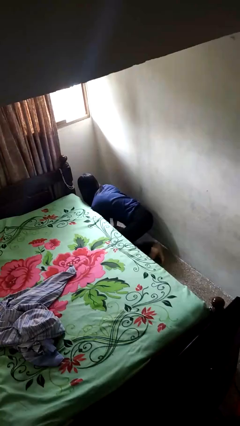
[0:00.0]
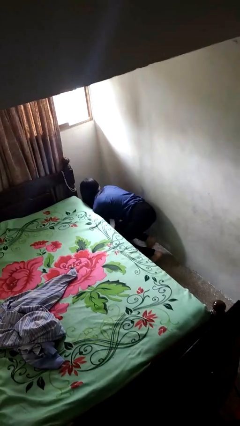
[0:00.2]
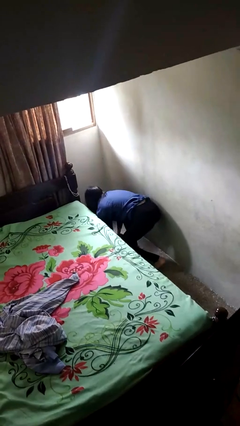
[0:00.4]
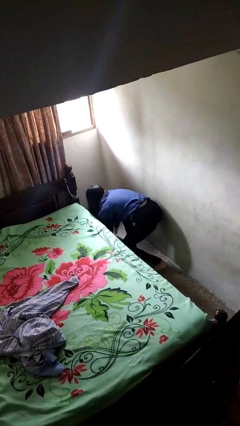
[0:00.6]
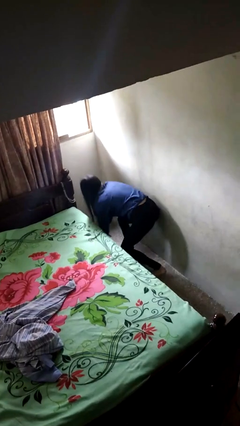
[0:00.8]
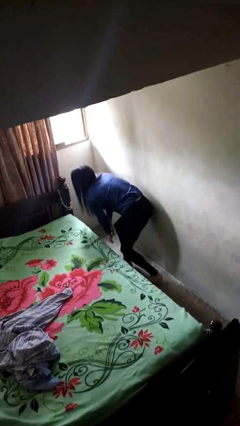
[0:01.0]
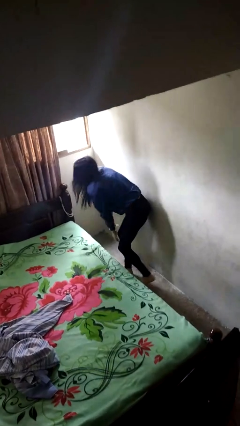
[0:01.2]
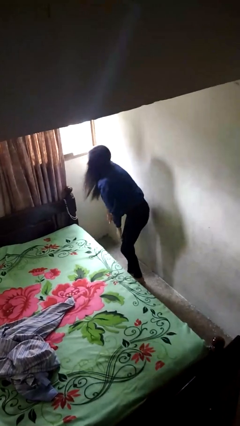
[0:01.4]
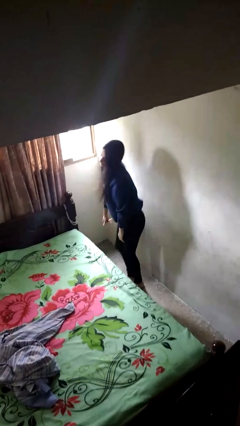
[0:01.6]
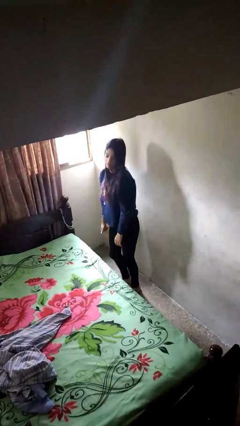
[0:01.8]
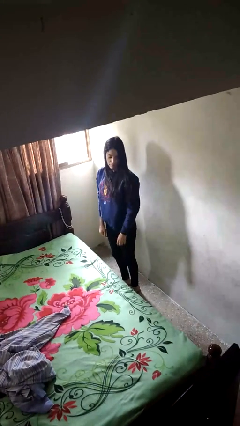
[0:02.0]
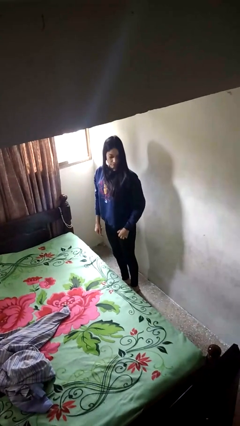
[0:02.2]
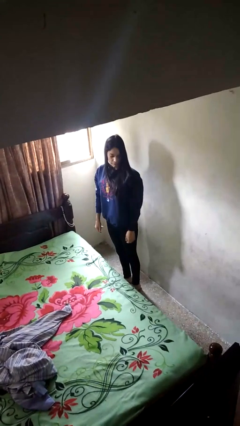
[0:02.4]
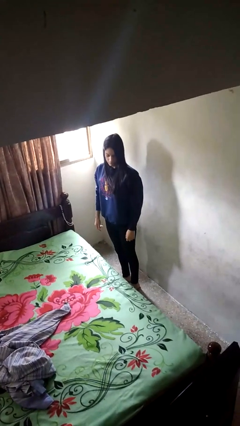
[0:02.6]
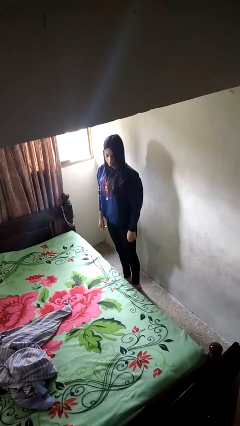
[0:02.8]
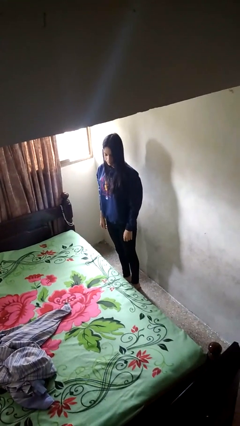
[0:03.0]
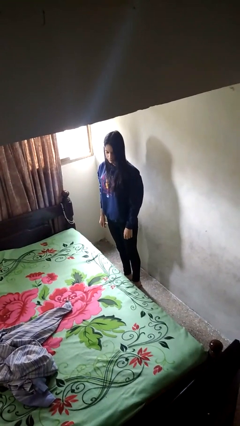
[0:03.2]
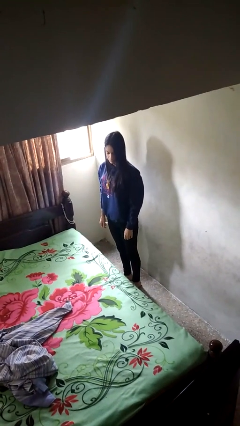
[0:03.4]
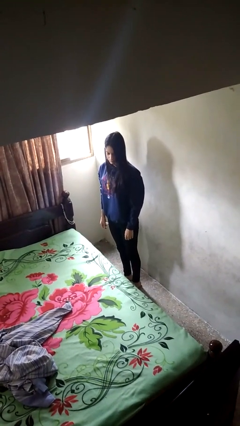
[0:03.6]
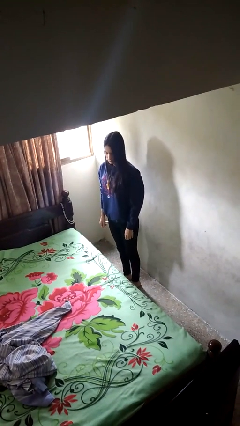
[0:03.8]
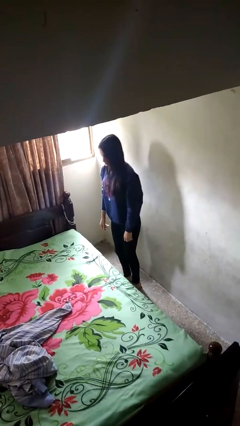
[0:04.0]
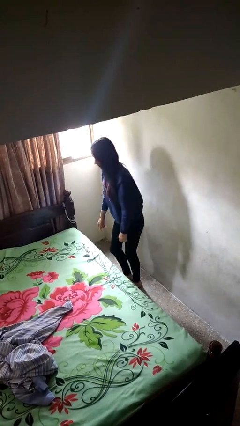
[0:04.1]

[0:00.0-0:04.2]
person stands up from floor

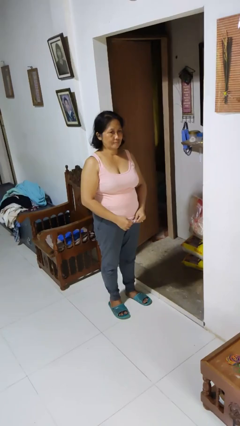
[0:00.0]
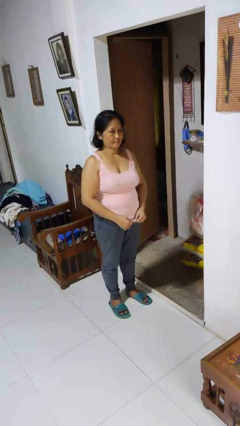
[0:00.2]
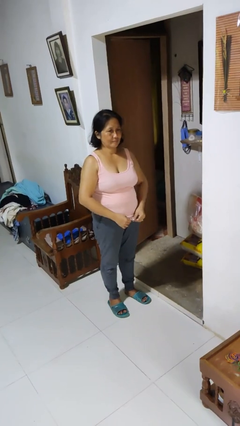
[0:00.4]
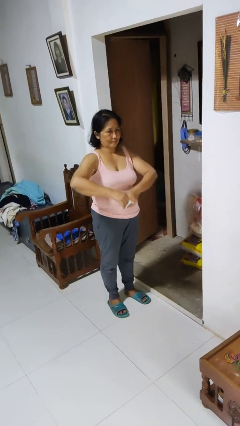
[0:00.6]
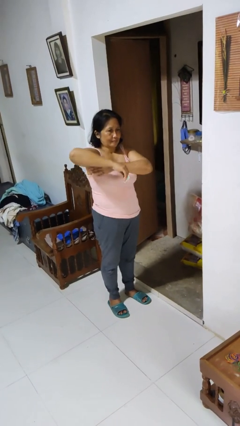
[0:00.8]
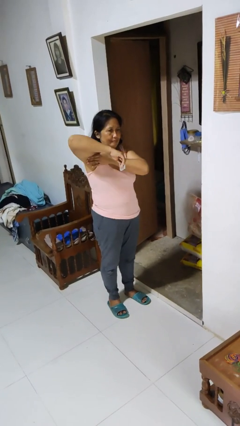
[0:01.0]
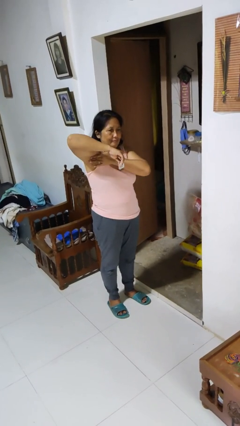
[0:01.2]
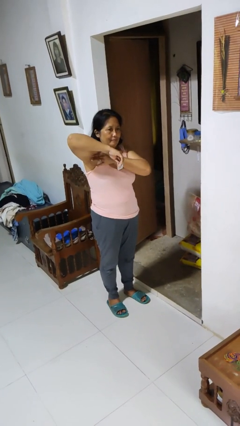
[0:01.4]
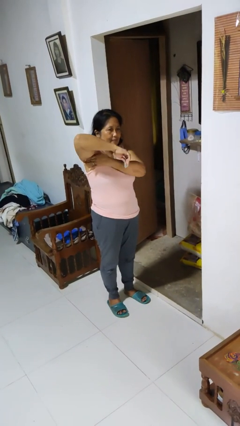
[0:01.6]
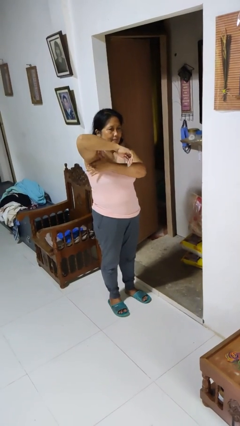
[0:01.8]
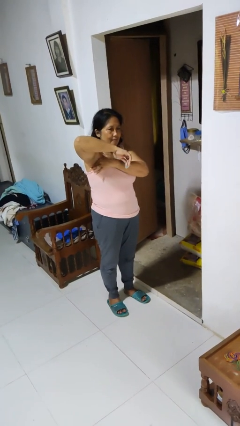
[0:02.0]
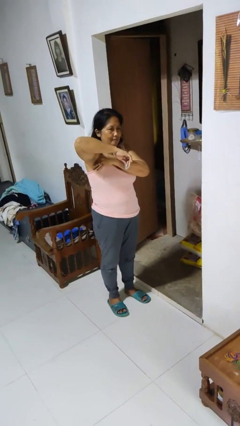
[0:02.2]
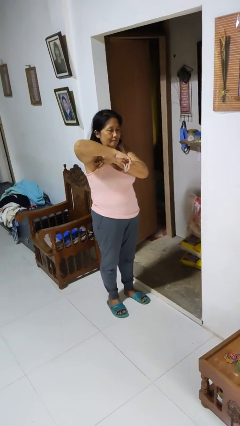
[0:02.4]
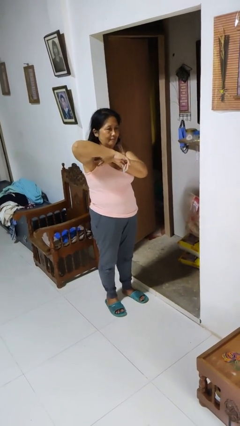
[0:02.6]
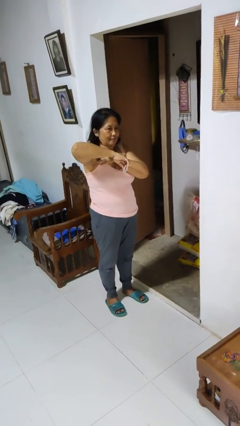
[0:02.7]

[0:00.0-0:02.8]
person applies deodorant

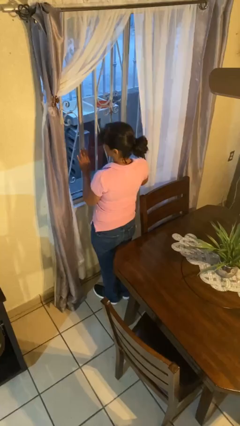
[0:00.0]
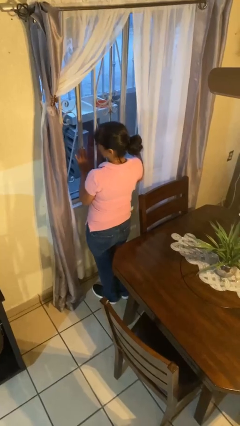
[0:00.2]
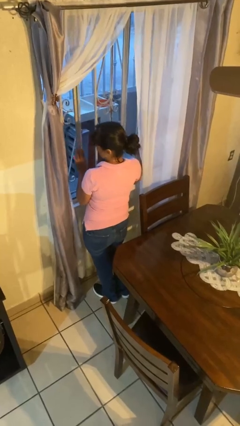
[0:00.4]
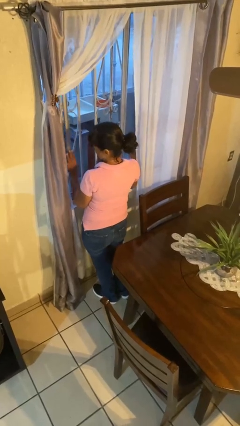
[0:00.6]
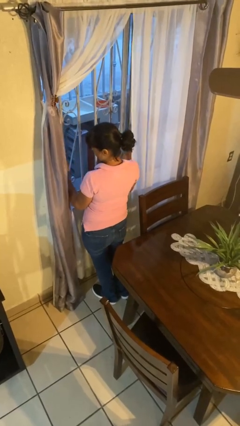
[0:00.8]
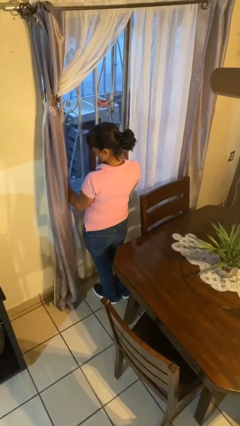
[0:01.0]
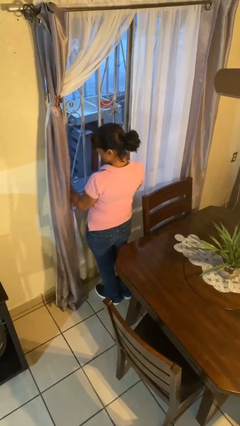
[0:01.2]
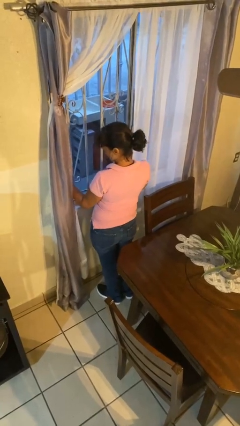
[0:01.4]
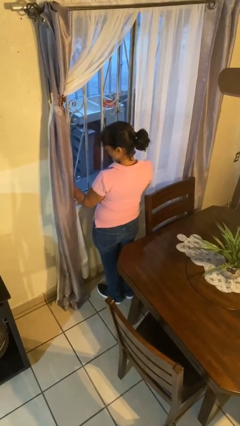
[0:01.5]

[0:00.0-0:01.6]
person closes home window

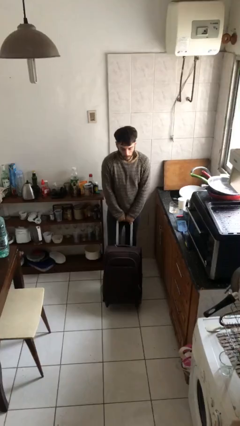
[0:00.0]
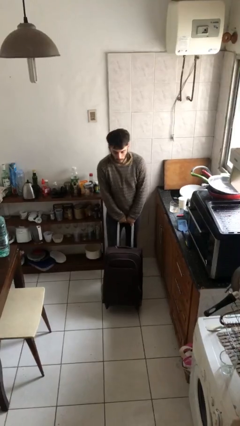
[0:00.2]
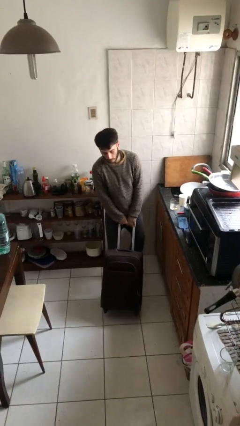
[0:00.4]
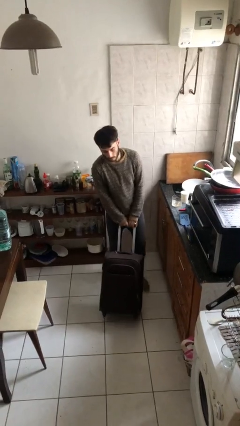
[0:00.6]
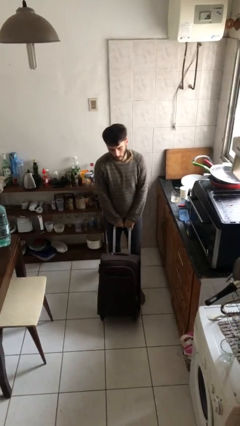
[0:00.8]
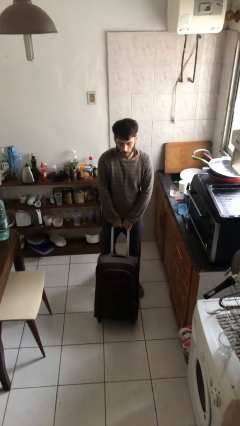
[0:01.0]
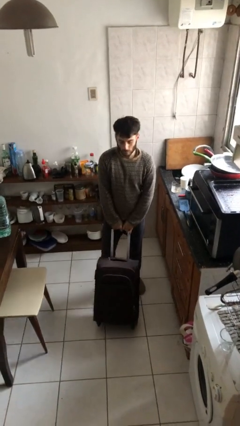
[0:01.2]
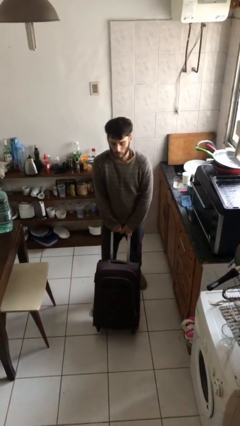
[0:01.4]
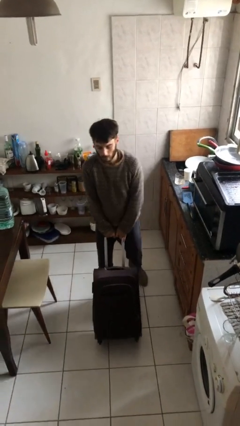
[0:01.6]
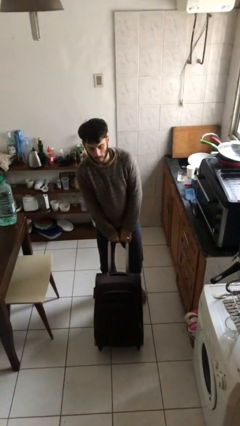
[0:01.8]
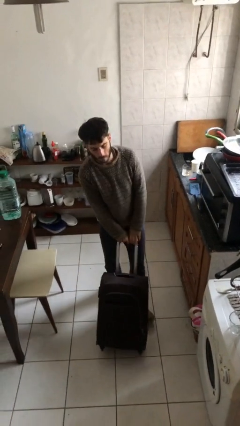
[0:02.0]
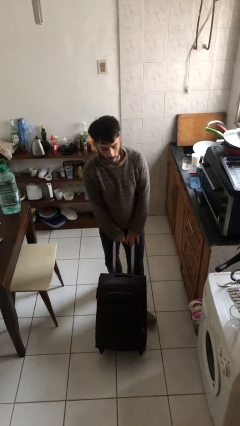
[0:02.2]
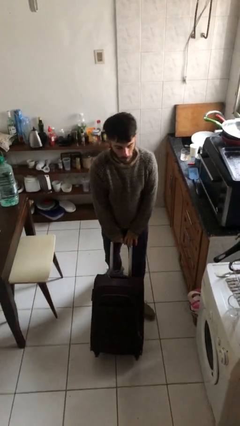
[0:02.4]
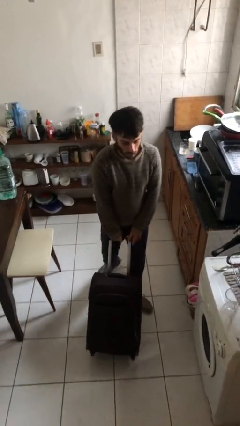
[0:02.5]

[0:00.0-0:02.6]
person pushes wheeled cart

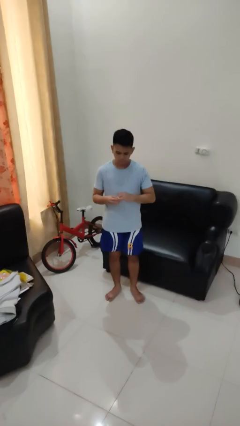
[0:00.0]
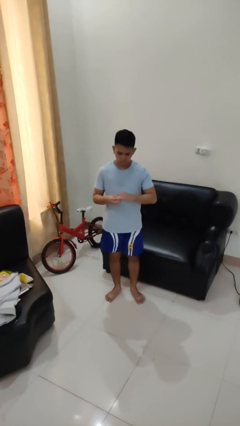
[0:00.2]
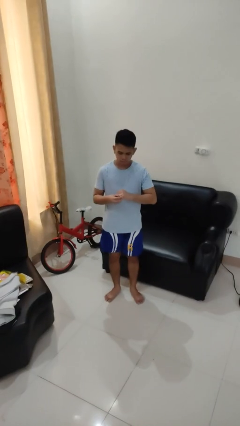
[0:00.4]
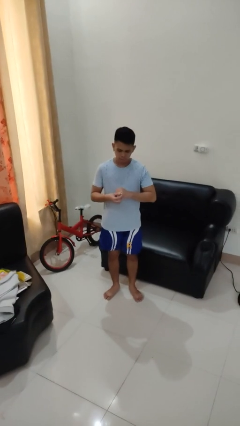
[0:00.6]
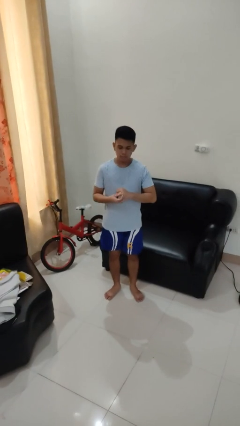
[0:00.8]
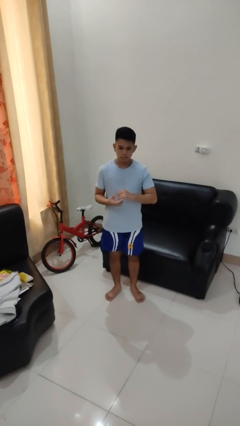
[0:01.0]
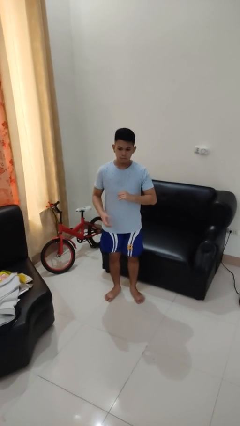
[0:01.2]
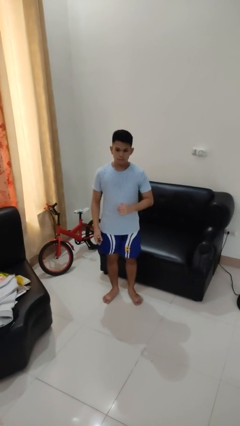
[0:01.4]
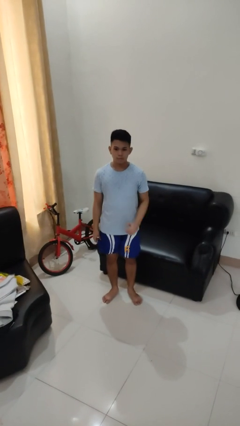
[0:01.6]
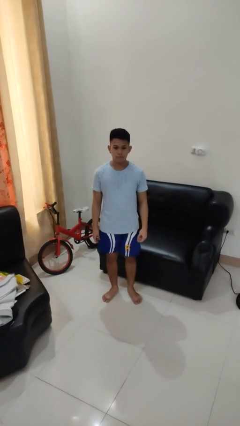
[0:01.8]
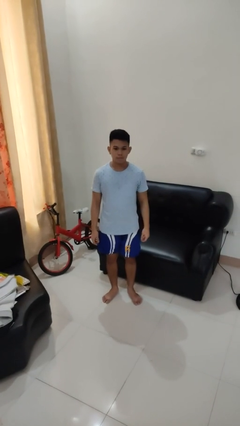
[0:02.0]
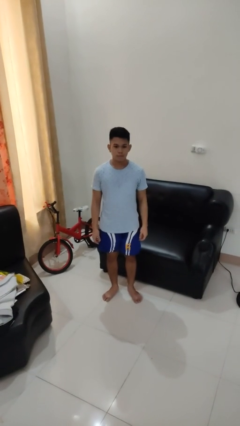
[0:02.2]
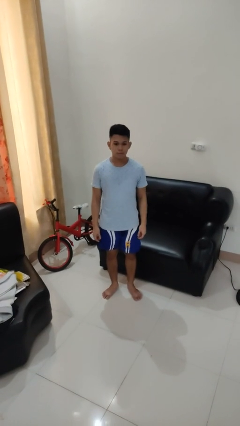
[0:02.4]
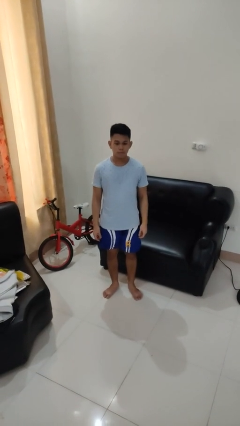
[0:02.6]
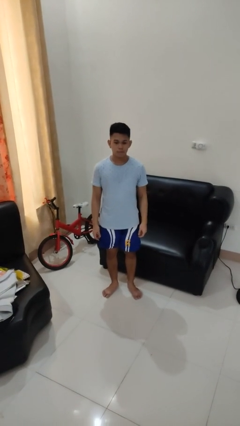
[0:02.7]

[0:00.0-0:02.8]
person puts on ring

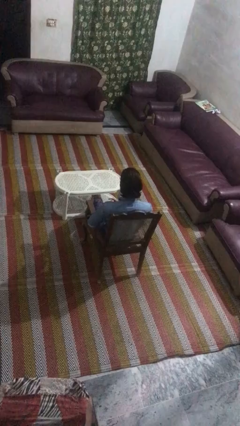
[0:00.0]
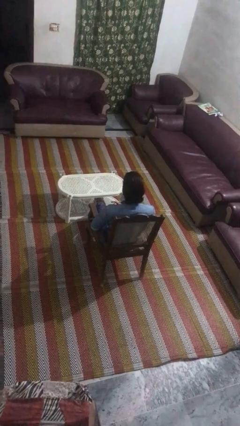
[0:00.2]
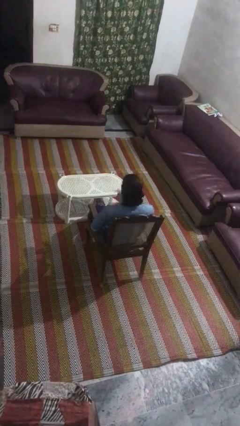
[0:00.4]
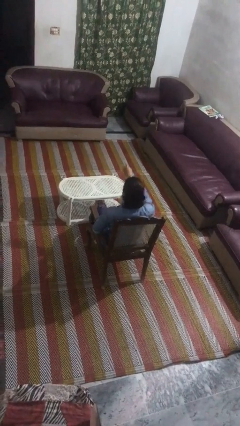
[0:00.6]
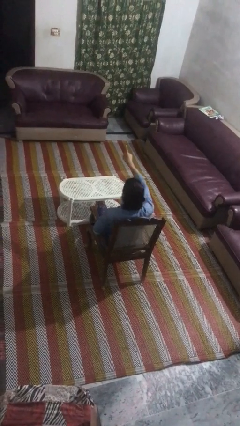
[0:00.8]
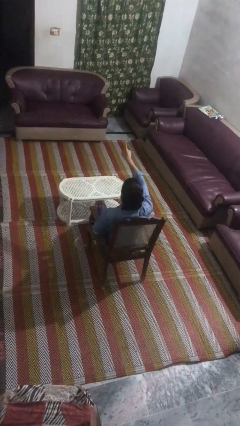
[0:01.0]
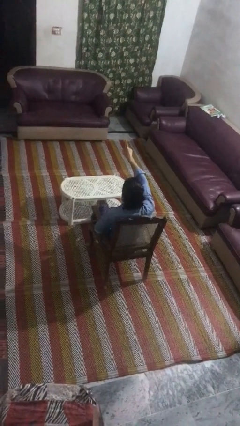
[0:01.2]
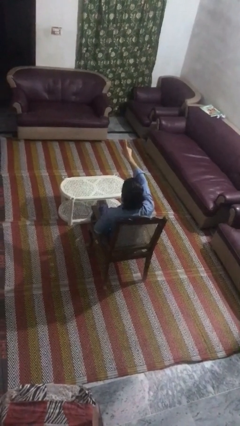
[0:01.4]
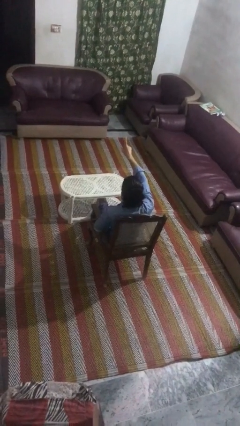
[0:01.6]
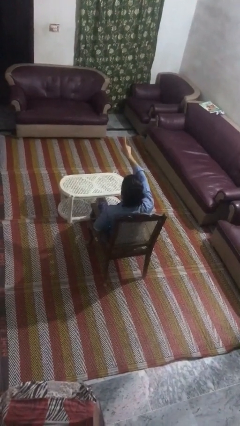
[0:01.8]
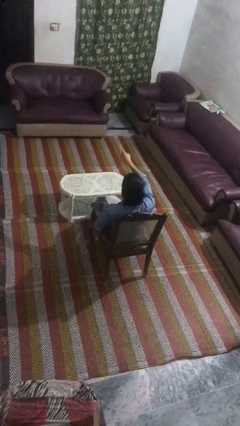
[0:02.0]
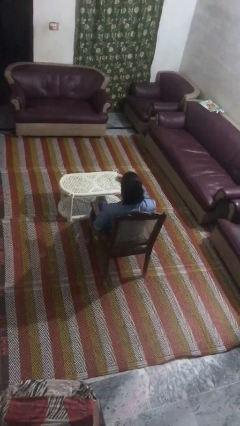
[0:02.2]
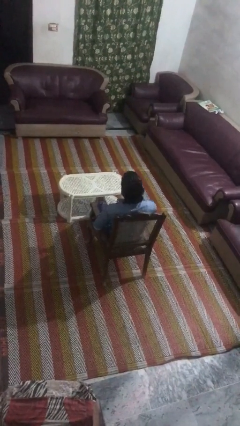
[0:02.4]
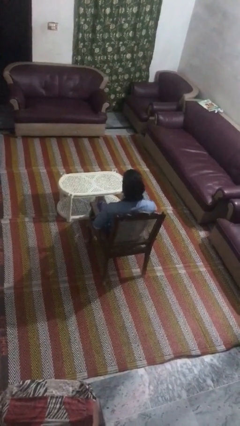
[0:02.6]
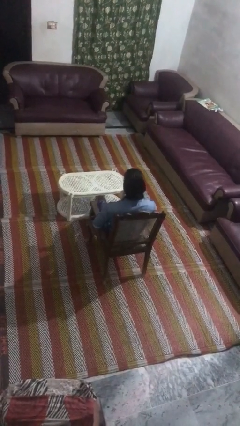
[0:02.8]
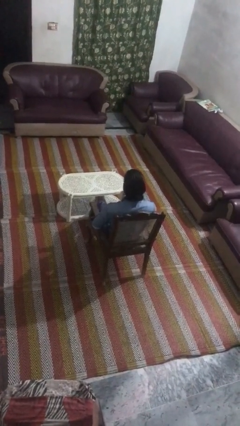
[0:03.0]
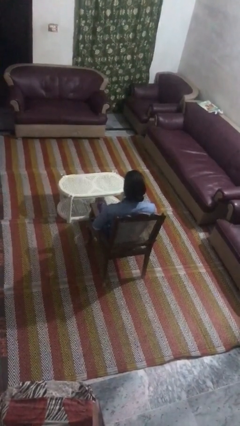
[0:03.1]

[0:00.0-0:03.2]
person gestures number one

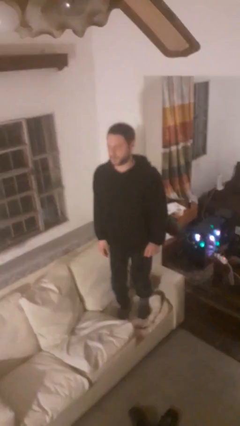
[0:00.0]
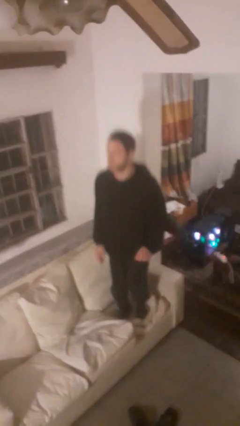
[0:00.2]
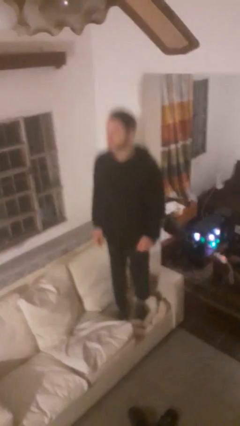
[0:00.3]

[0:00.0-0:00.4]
person jumps on couch

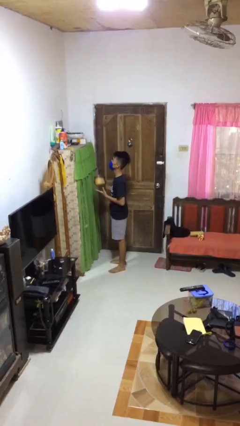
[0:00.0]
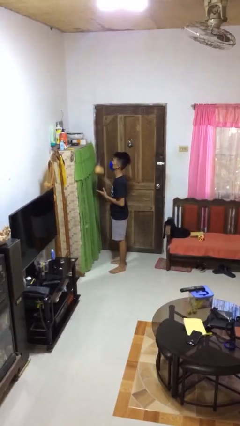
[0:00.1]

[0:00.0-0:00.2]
person puts down object on shelf
